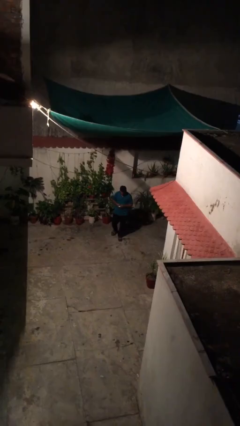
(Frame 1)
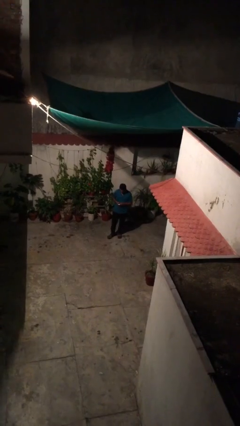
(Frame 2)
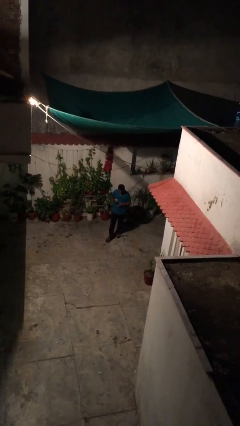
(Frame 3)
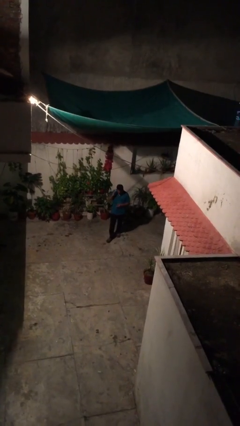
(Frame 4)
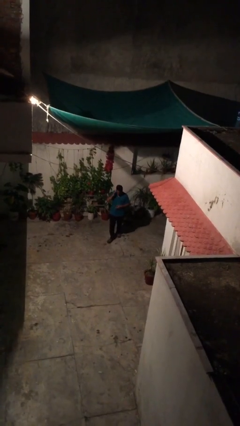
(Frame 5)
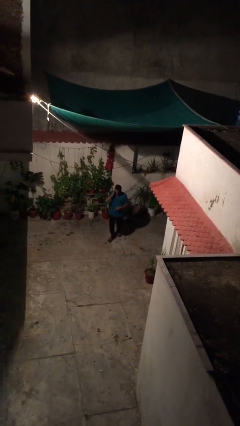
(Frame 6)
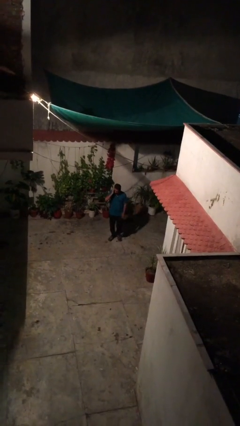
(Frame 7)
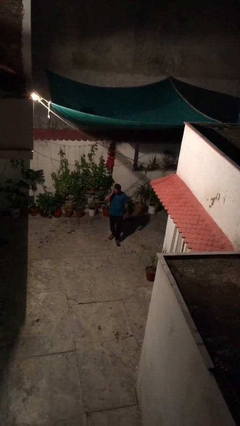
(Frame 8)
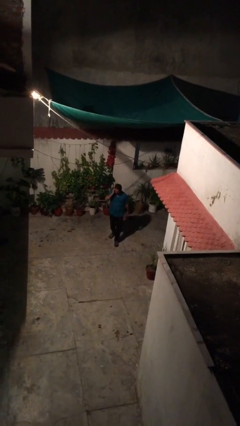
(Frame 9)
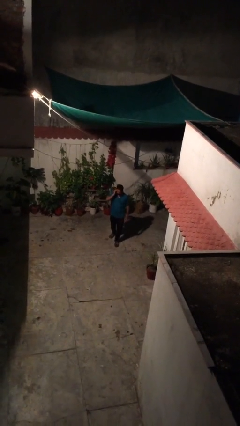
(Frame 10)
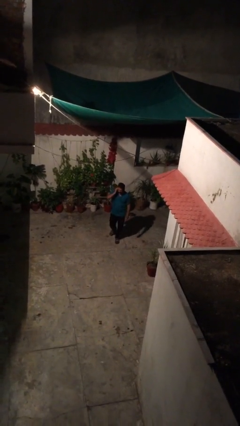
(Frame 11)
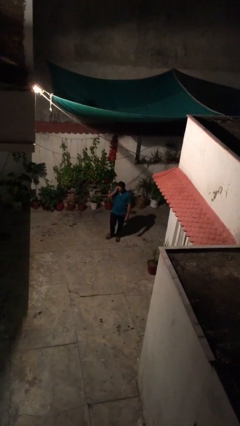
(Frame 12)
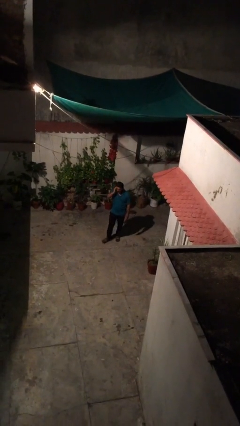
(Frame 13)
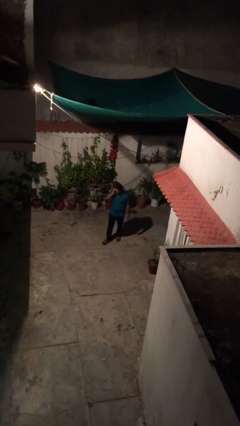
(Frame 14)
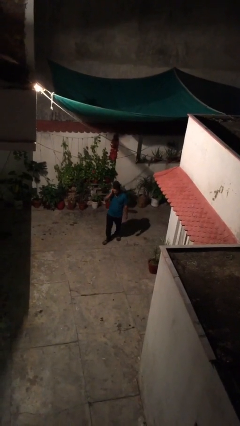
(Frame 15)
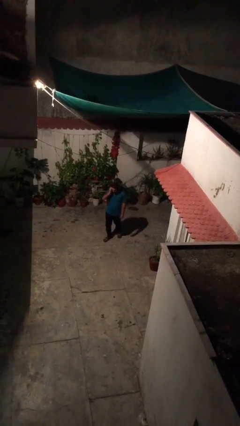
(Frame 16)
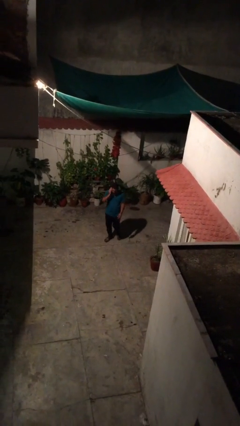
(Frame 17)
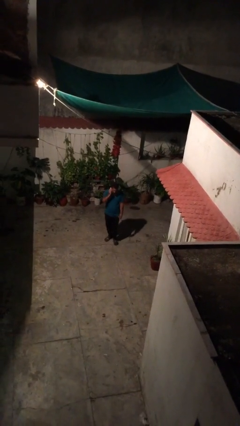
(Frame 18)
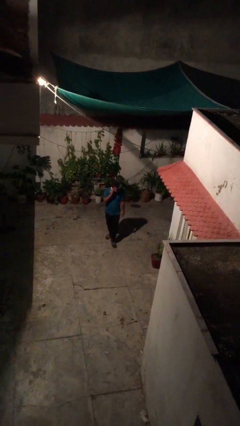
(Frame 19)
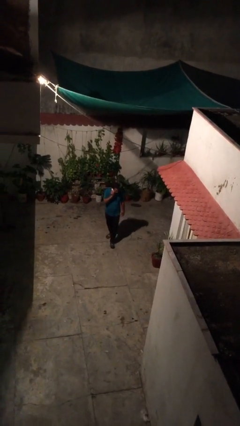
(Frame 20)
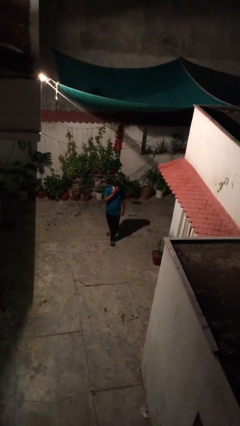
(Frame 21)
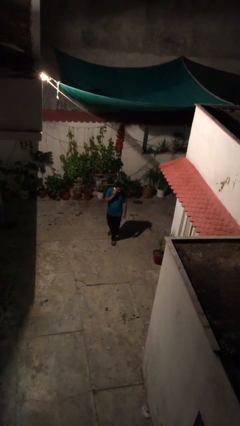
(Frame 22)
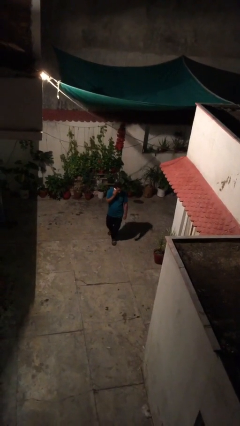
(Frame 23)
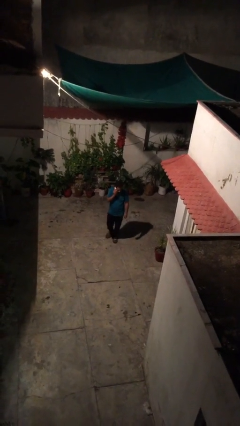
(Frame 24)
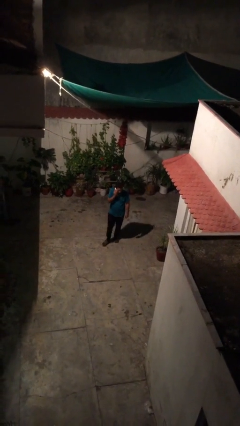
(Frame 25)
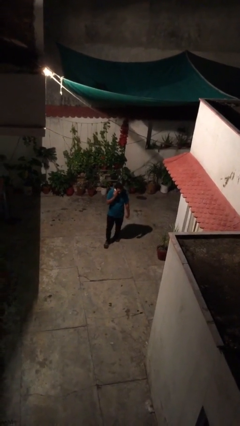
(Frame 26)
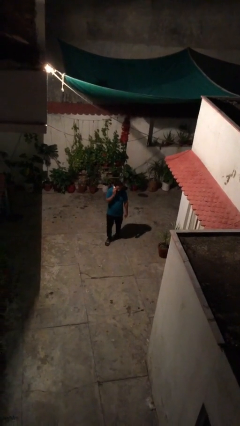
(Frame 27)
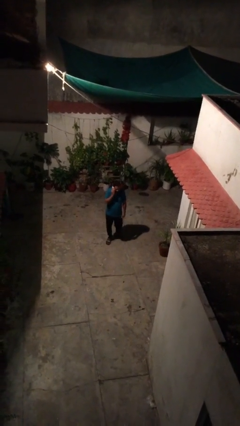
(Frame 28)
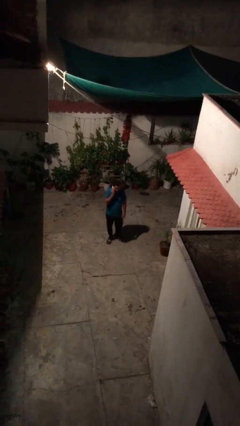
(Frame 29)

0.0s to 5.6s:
person talks on phone

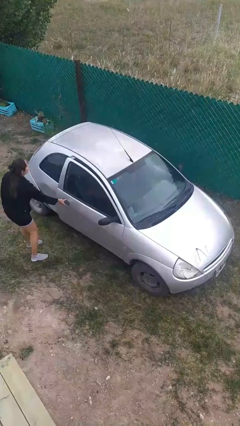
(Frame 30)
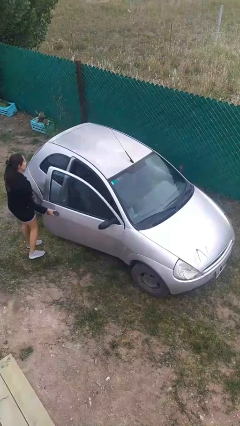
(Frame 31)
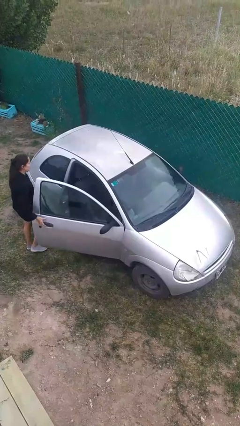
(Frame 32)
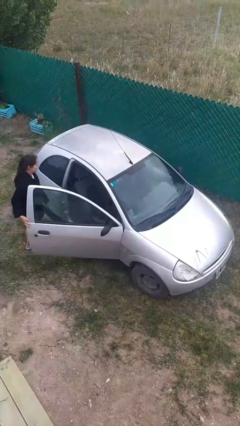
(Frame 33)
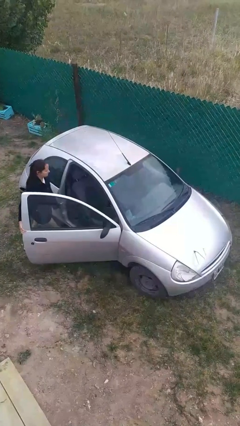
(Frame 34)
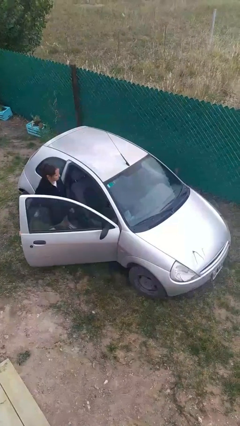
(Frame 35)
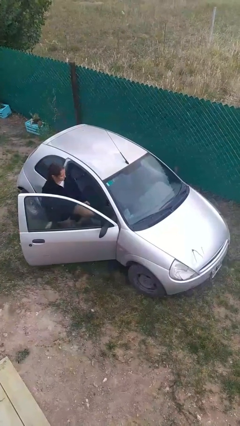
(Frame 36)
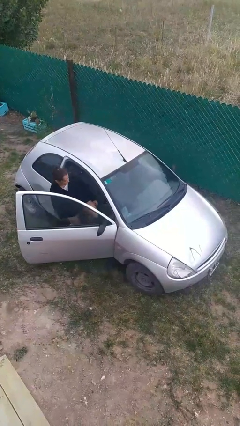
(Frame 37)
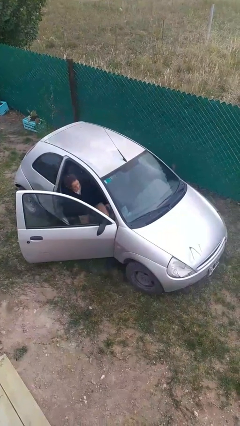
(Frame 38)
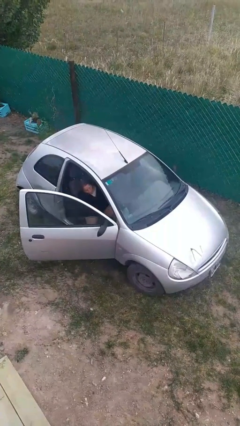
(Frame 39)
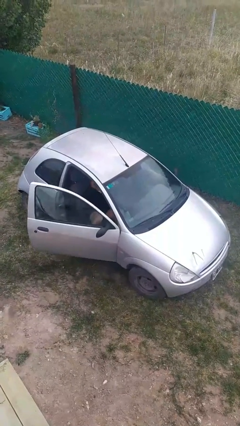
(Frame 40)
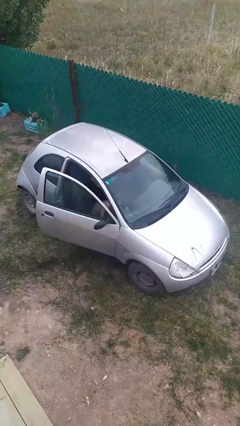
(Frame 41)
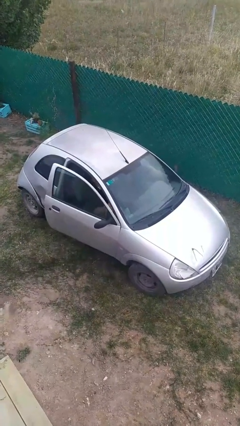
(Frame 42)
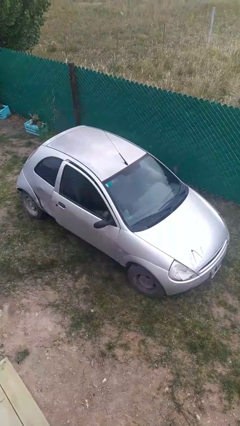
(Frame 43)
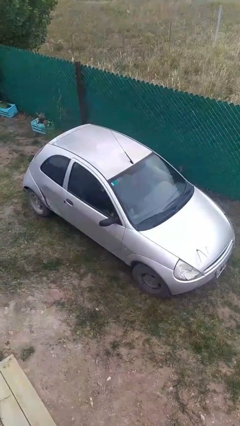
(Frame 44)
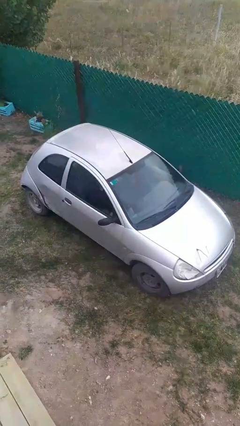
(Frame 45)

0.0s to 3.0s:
car picks up person

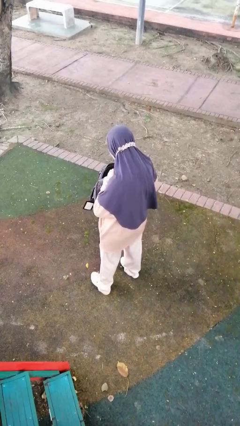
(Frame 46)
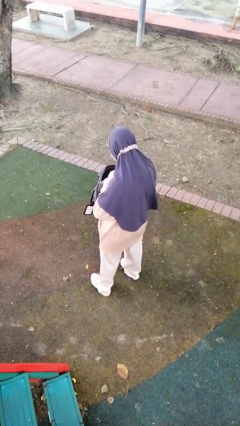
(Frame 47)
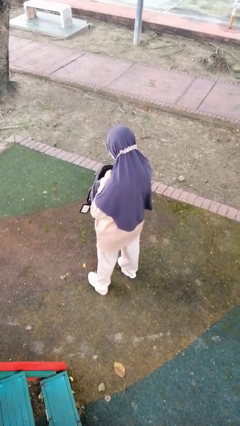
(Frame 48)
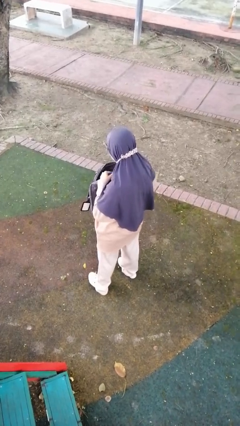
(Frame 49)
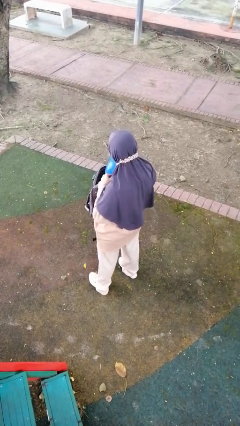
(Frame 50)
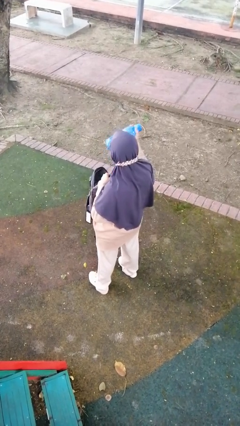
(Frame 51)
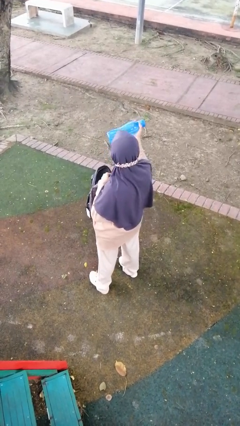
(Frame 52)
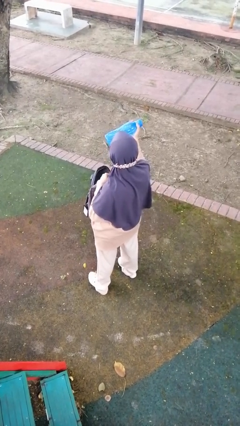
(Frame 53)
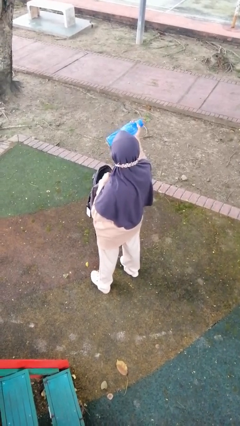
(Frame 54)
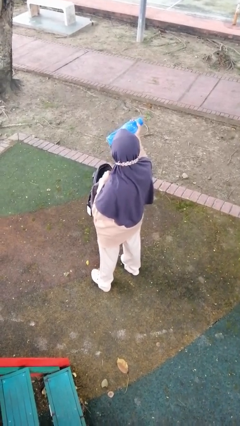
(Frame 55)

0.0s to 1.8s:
person takes object from backpack

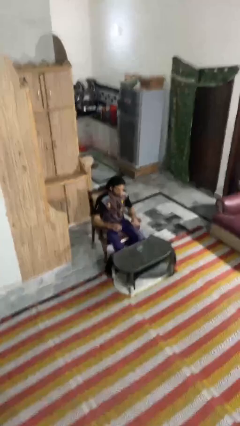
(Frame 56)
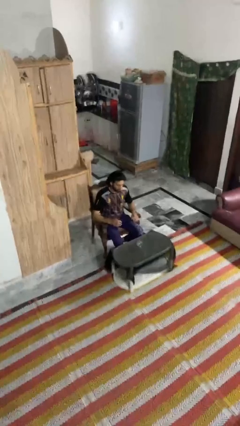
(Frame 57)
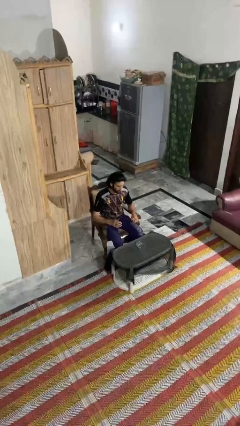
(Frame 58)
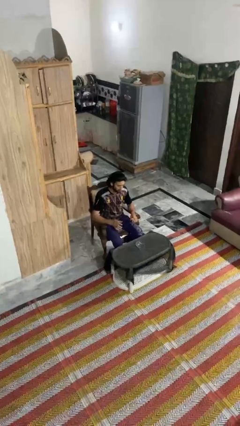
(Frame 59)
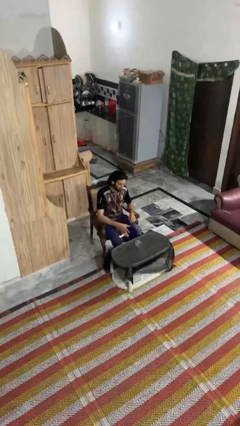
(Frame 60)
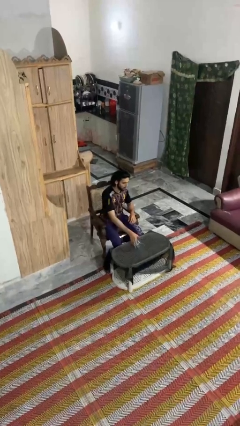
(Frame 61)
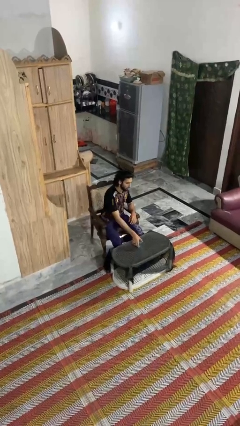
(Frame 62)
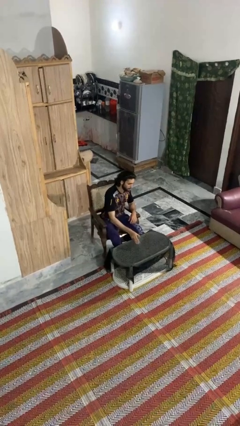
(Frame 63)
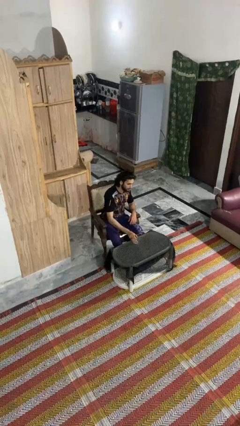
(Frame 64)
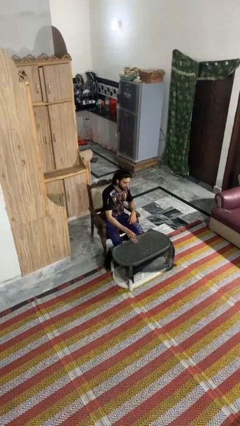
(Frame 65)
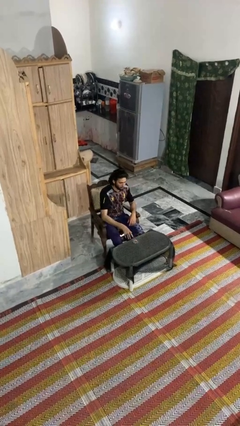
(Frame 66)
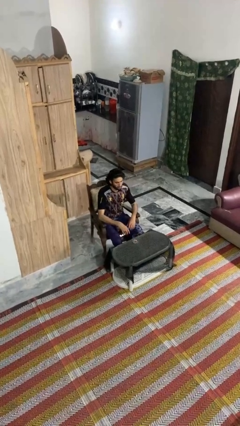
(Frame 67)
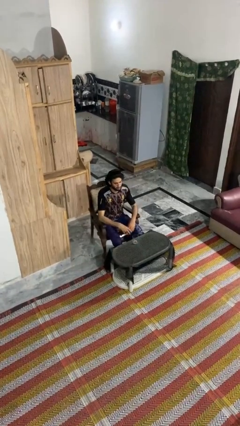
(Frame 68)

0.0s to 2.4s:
person sets upright glass

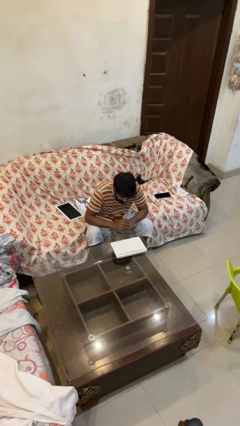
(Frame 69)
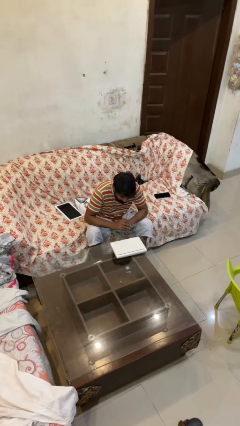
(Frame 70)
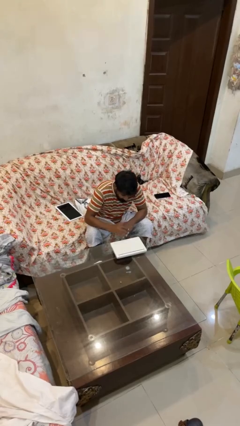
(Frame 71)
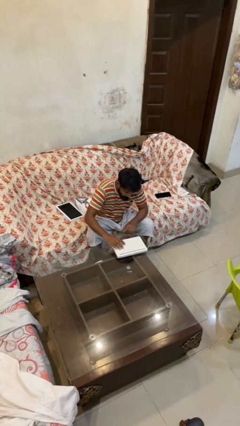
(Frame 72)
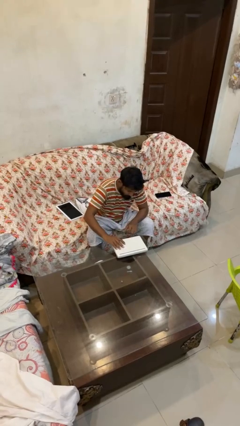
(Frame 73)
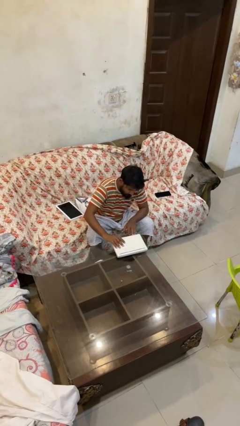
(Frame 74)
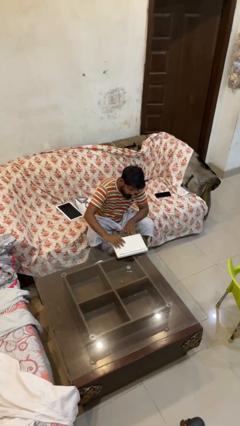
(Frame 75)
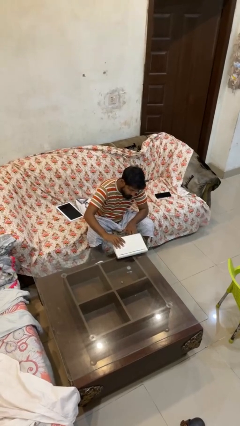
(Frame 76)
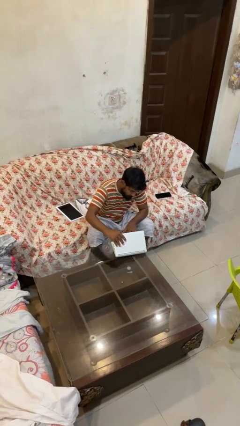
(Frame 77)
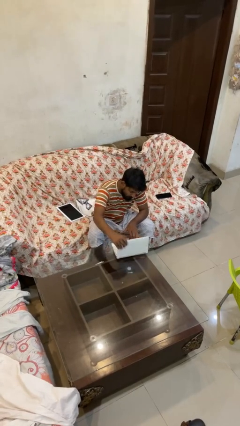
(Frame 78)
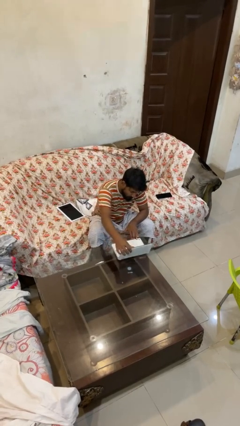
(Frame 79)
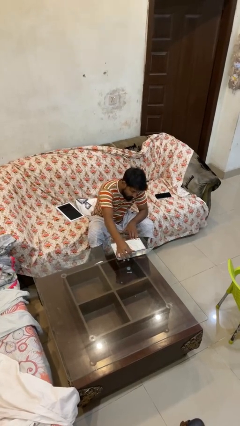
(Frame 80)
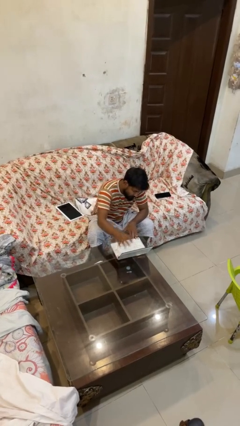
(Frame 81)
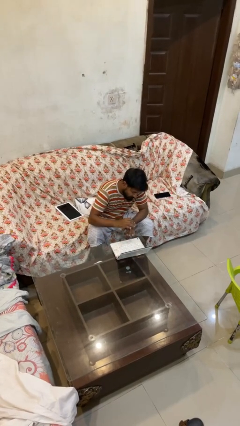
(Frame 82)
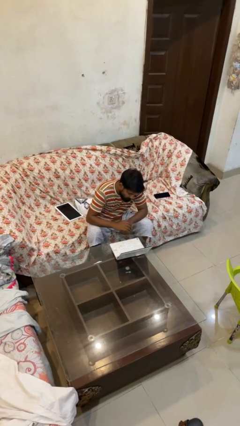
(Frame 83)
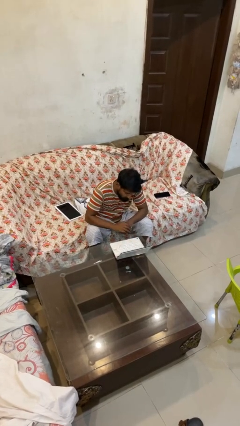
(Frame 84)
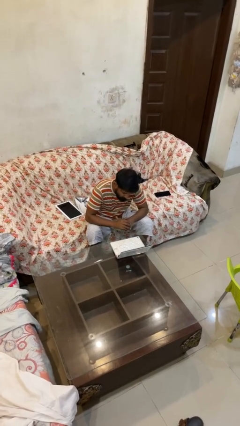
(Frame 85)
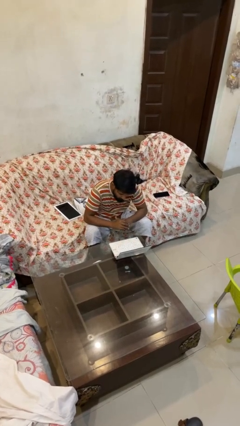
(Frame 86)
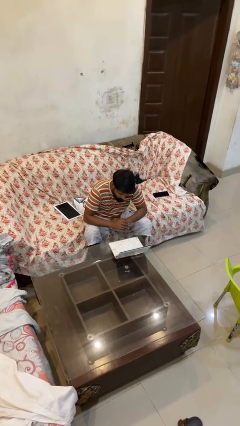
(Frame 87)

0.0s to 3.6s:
person opens laptop

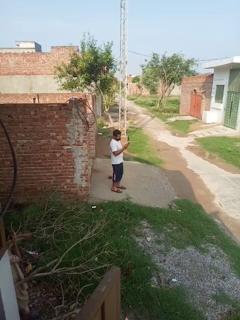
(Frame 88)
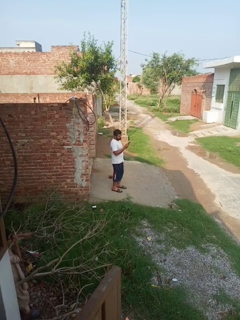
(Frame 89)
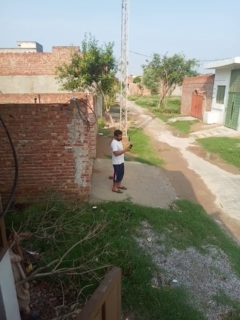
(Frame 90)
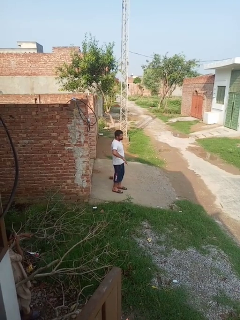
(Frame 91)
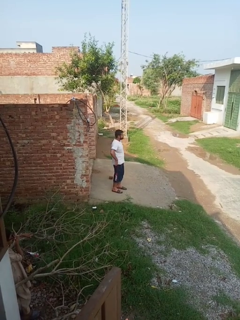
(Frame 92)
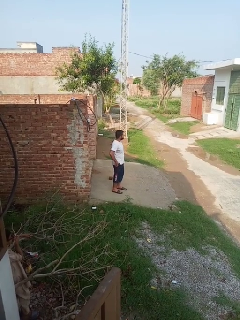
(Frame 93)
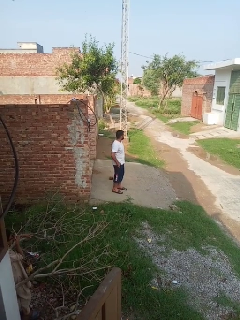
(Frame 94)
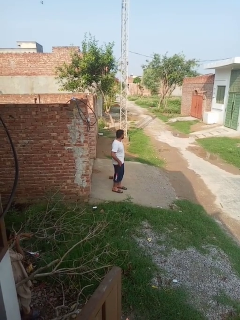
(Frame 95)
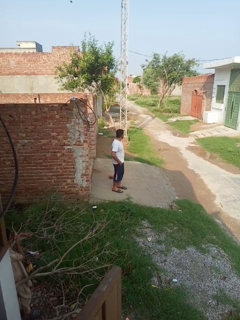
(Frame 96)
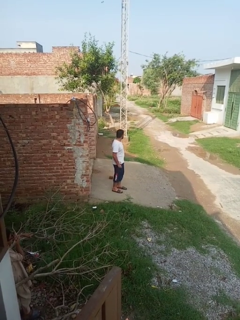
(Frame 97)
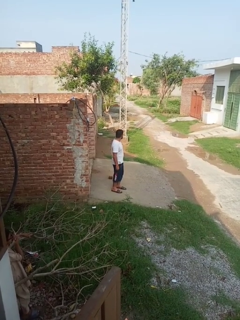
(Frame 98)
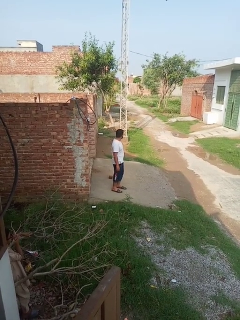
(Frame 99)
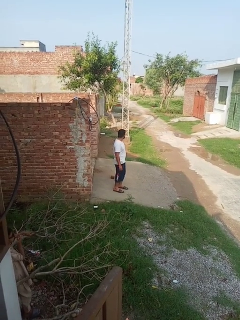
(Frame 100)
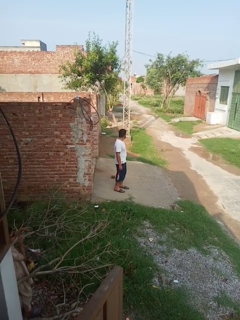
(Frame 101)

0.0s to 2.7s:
person puts phone into pocket
